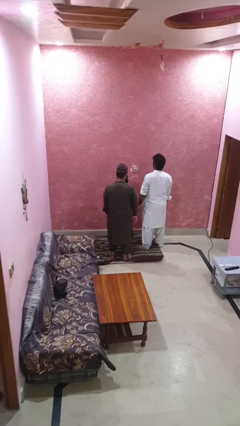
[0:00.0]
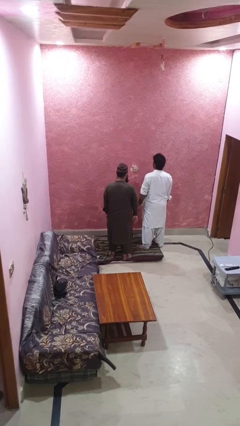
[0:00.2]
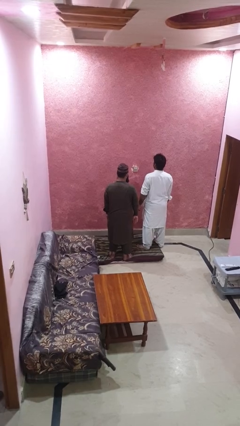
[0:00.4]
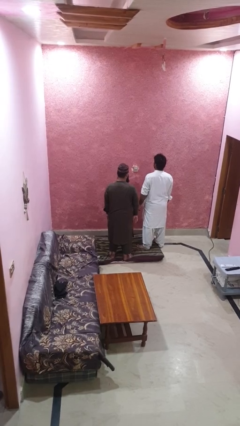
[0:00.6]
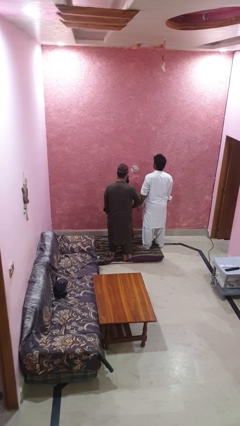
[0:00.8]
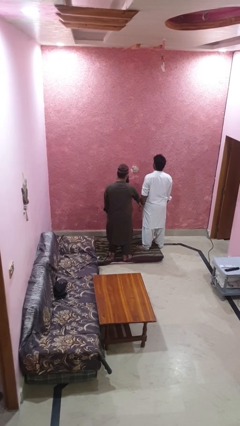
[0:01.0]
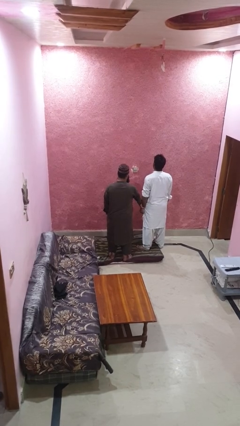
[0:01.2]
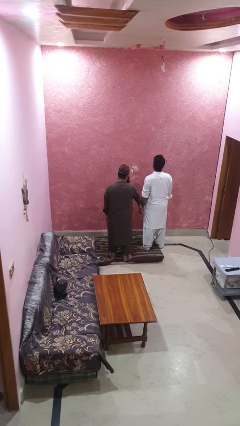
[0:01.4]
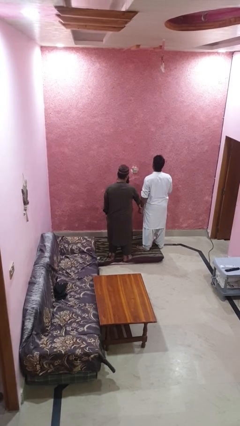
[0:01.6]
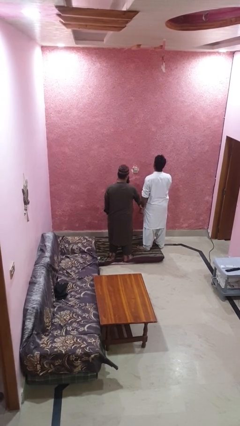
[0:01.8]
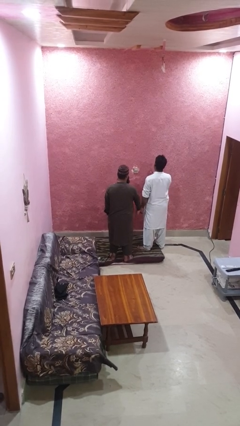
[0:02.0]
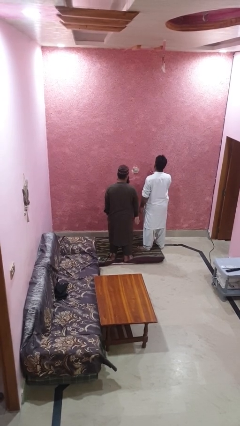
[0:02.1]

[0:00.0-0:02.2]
person grabs person by forearm

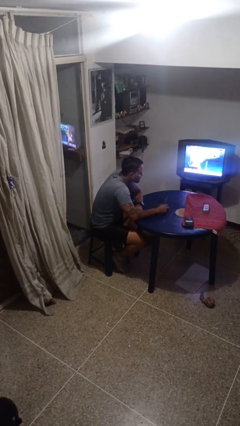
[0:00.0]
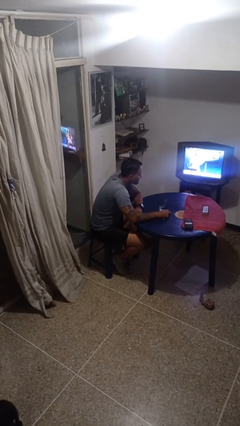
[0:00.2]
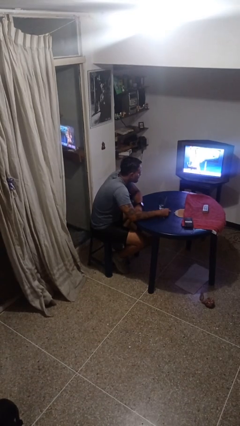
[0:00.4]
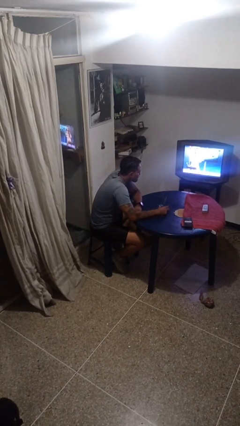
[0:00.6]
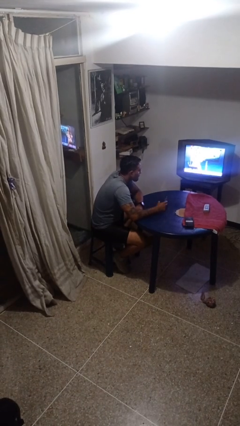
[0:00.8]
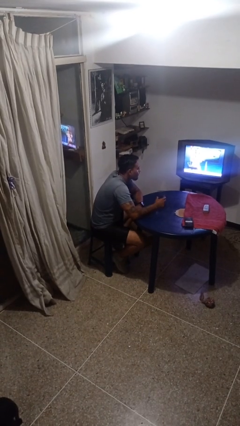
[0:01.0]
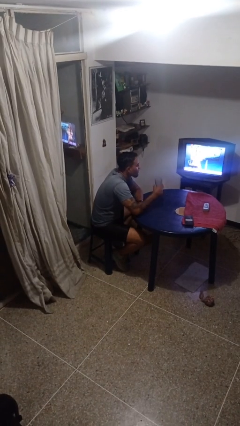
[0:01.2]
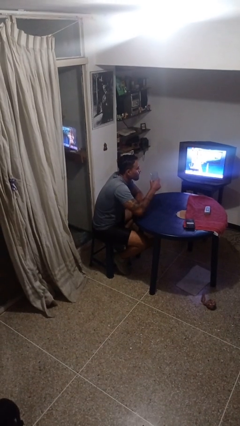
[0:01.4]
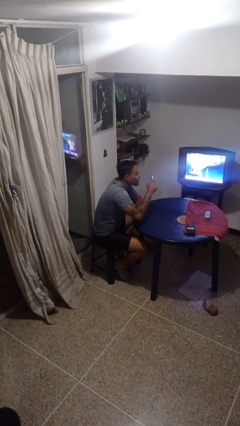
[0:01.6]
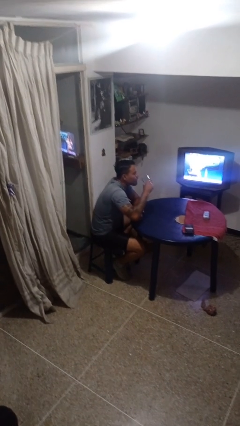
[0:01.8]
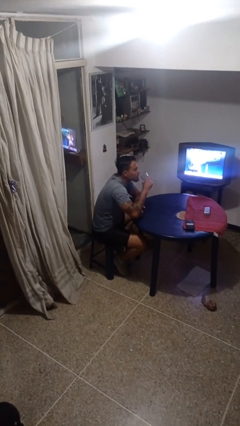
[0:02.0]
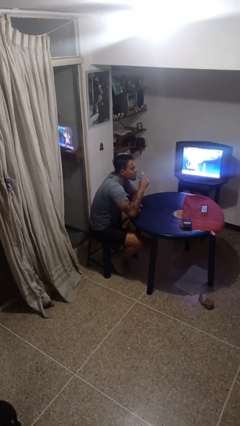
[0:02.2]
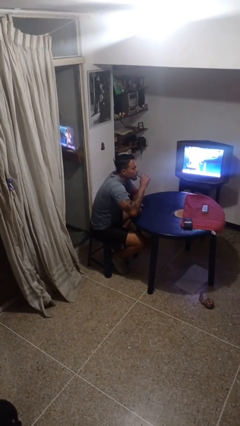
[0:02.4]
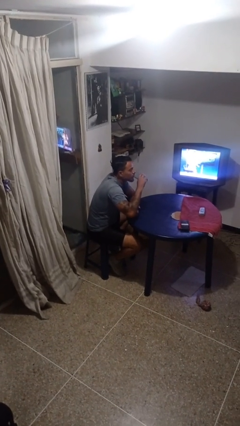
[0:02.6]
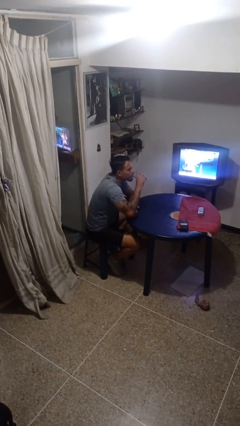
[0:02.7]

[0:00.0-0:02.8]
person picks up object from table

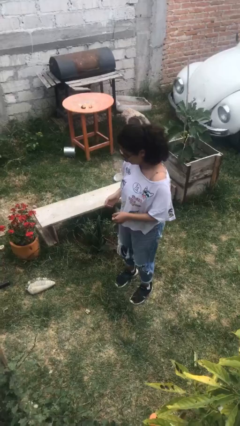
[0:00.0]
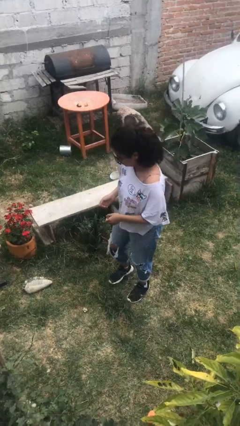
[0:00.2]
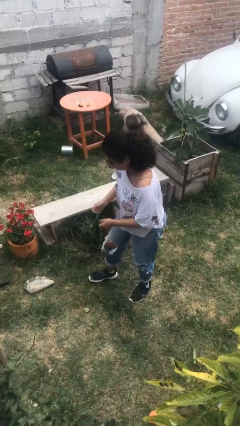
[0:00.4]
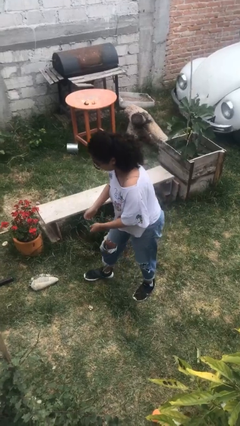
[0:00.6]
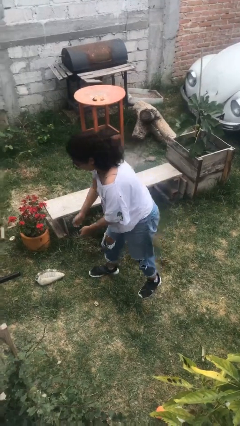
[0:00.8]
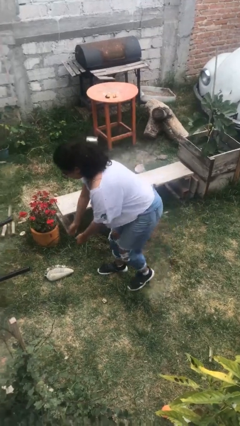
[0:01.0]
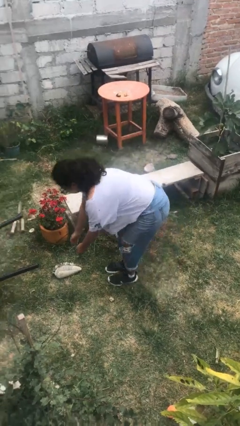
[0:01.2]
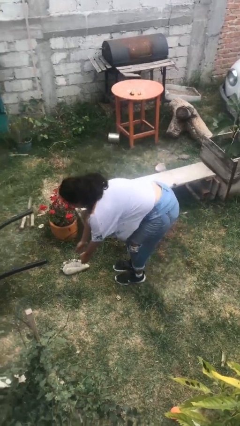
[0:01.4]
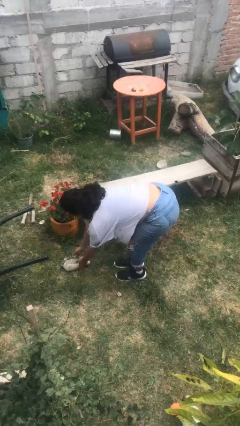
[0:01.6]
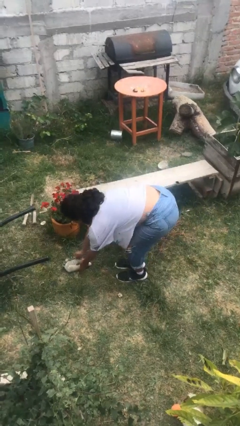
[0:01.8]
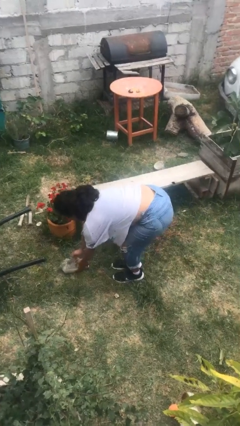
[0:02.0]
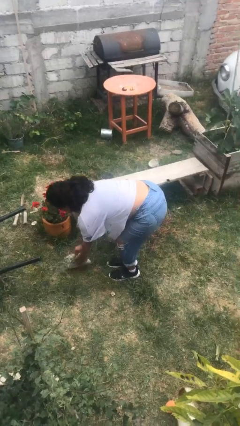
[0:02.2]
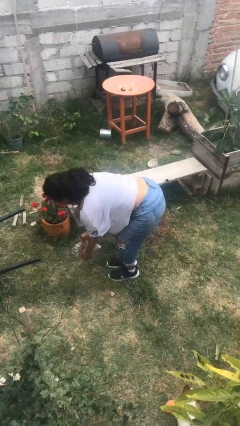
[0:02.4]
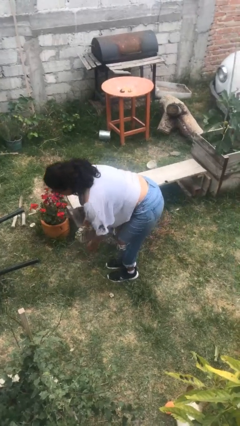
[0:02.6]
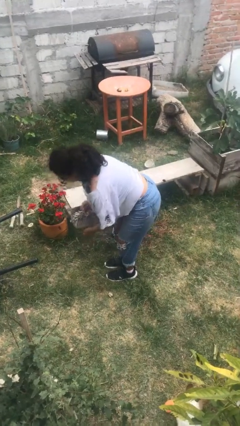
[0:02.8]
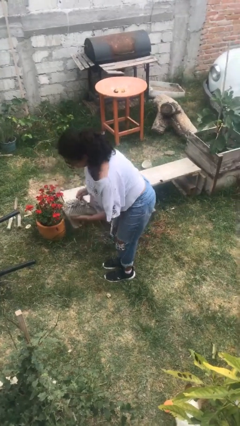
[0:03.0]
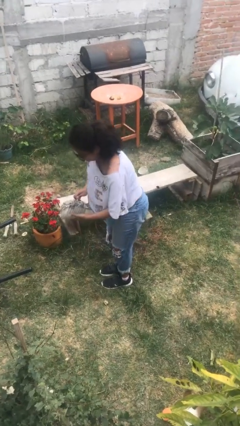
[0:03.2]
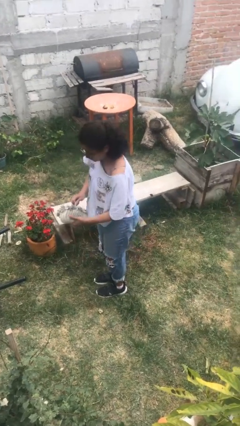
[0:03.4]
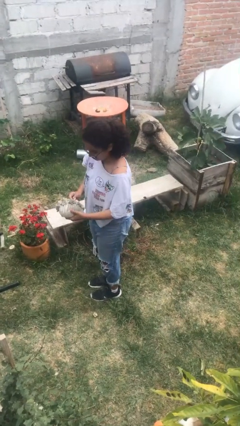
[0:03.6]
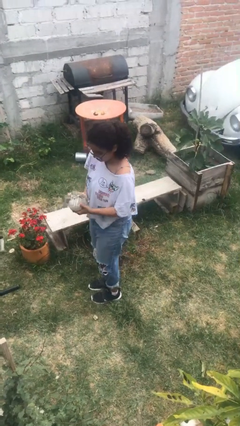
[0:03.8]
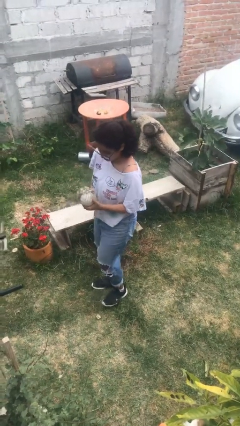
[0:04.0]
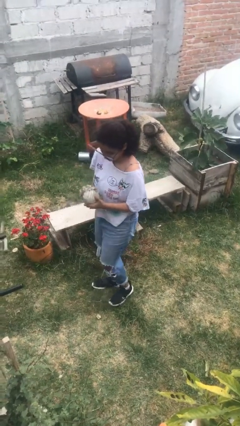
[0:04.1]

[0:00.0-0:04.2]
person picks up object from floor

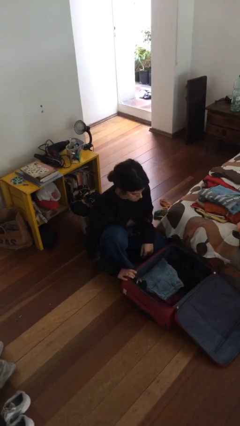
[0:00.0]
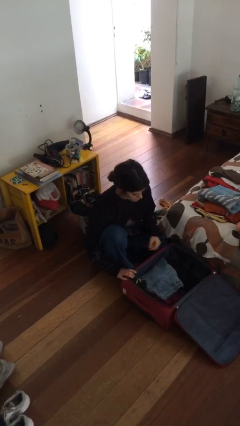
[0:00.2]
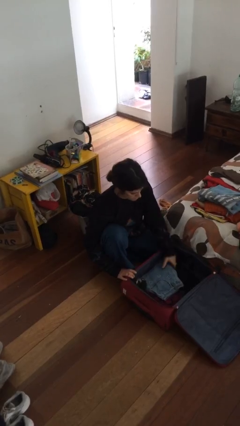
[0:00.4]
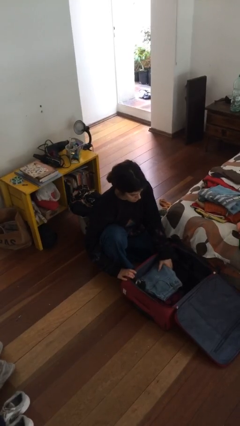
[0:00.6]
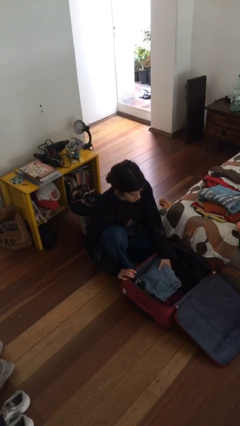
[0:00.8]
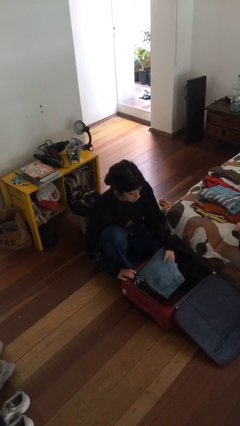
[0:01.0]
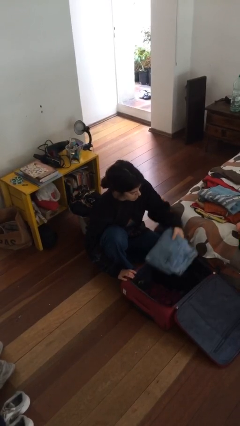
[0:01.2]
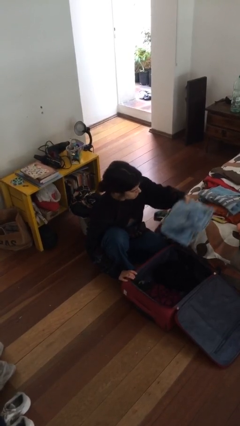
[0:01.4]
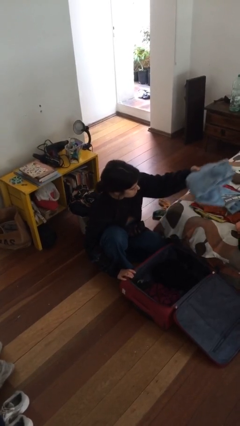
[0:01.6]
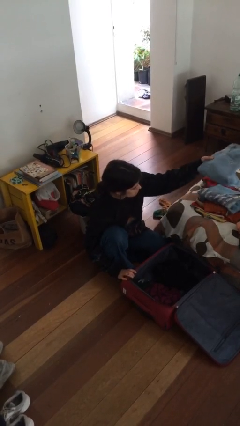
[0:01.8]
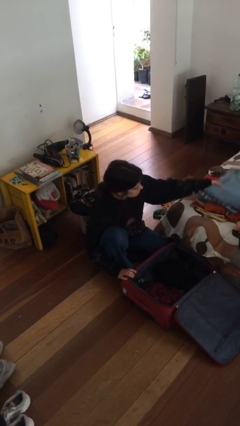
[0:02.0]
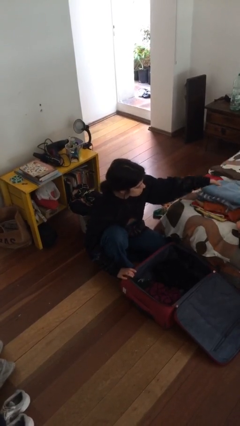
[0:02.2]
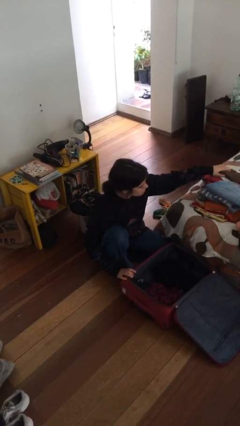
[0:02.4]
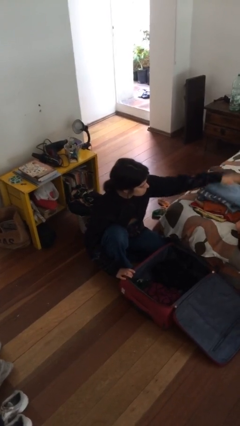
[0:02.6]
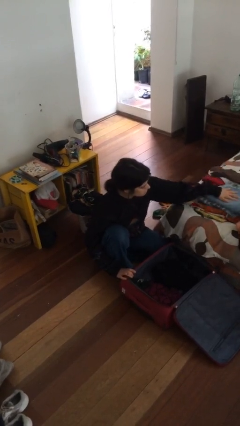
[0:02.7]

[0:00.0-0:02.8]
person unloads clothes from suitcase

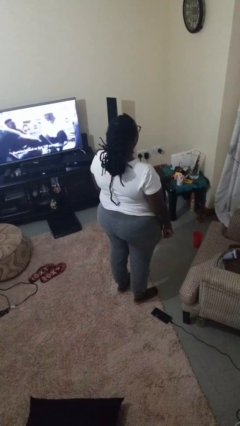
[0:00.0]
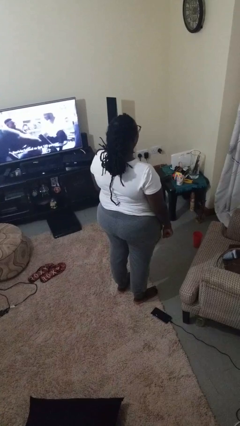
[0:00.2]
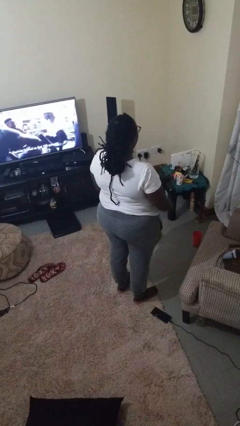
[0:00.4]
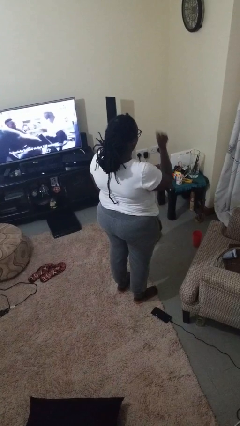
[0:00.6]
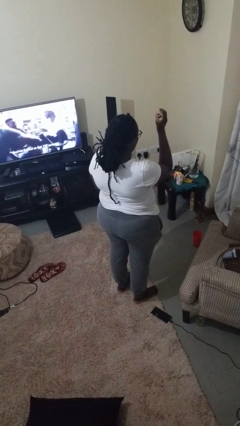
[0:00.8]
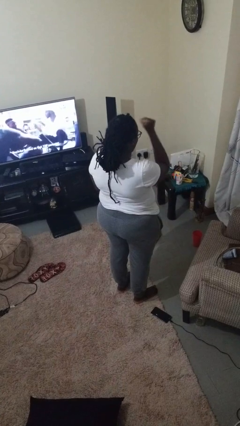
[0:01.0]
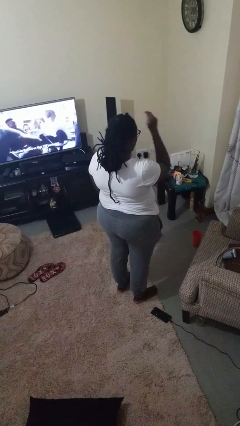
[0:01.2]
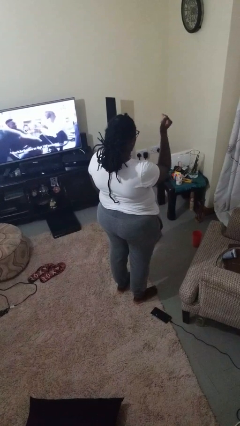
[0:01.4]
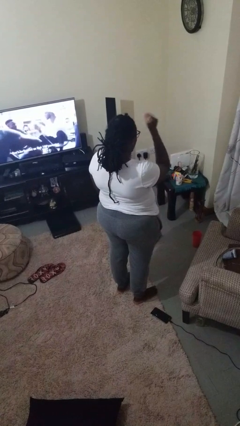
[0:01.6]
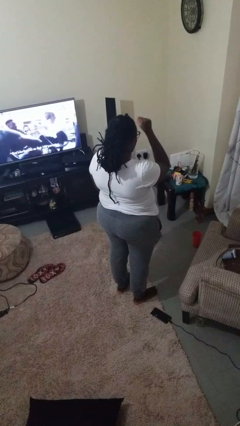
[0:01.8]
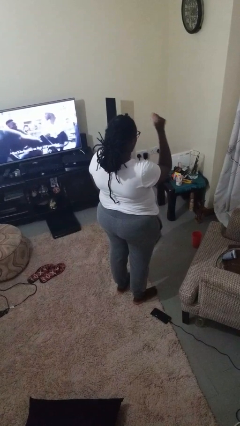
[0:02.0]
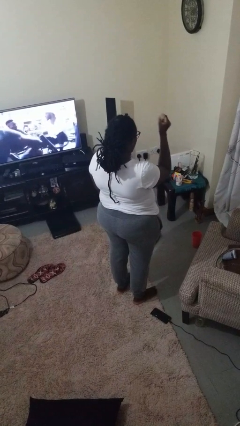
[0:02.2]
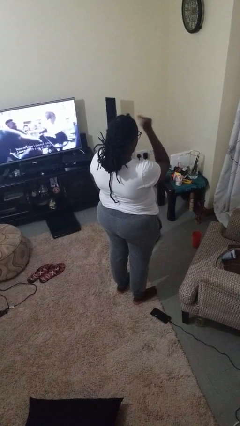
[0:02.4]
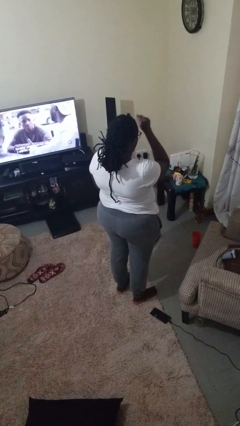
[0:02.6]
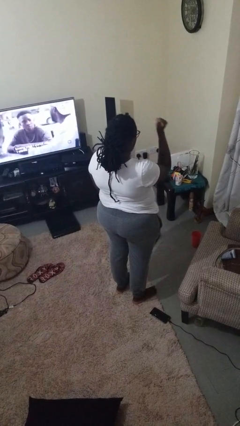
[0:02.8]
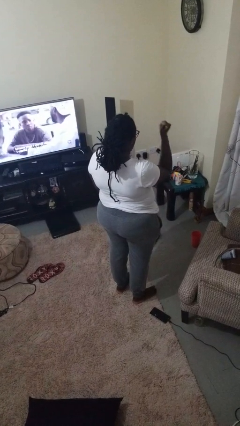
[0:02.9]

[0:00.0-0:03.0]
person snaps fingers

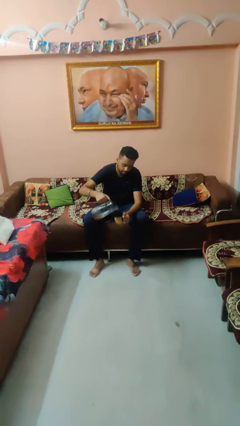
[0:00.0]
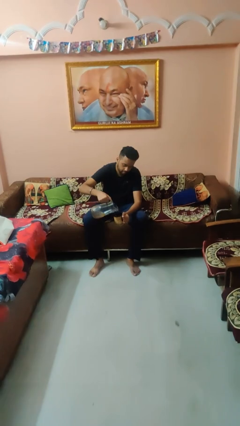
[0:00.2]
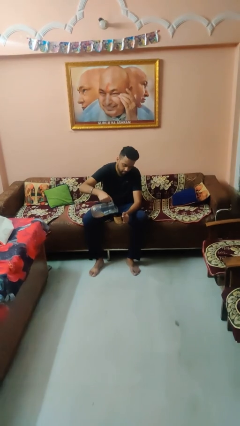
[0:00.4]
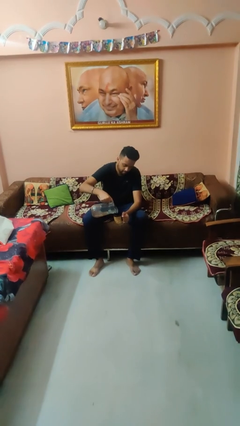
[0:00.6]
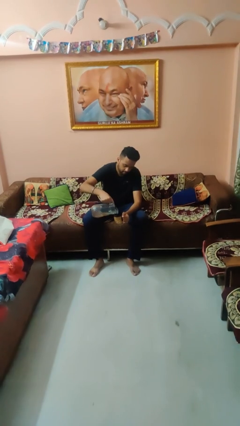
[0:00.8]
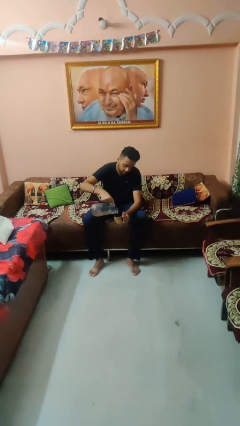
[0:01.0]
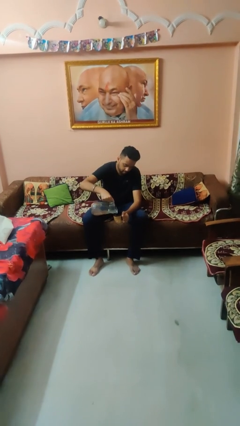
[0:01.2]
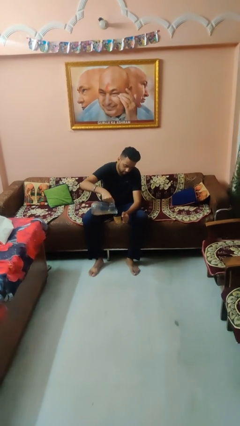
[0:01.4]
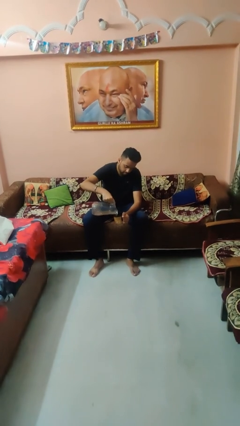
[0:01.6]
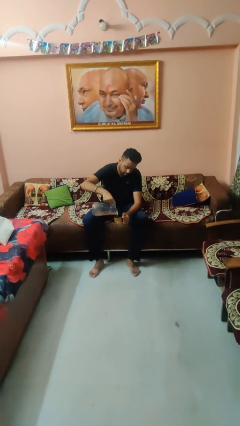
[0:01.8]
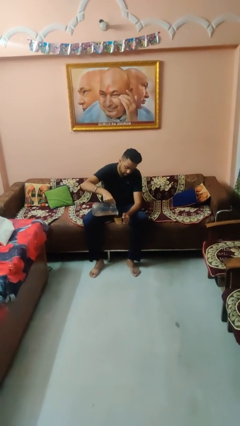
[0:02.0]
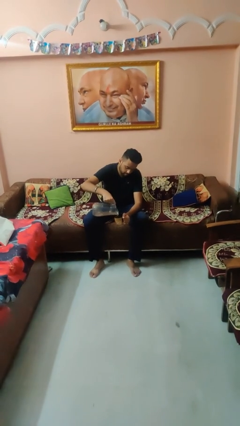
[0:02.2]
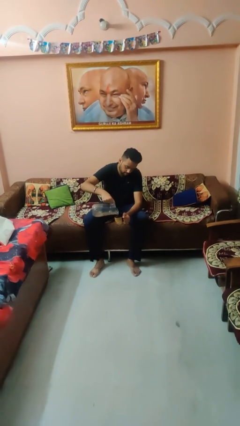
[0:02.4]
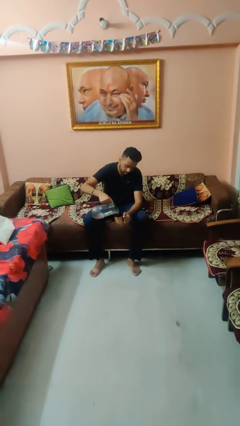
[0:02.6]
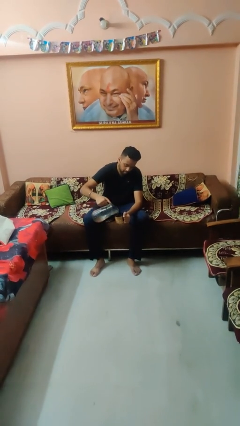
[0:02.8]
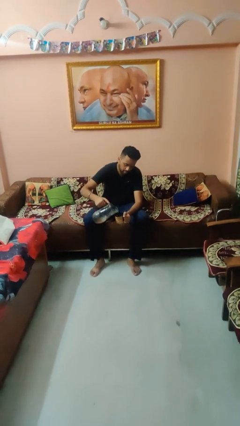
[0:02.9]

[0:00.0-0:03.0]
person pours coffee into mug
